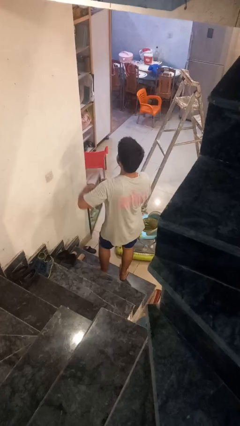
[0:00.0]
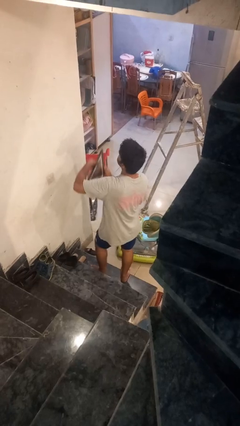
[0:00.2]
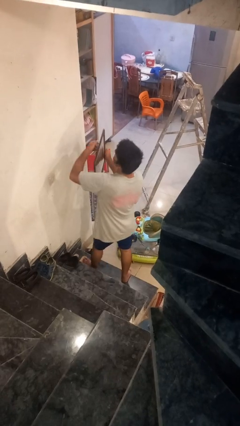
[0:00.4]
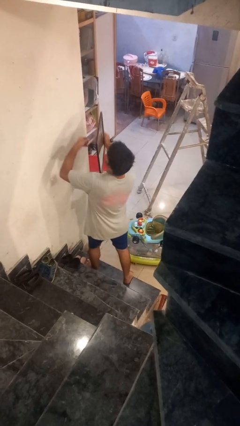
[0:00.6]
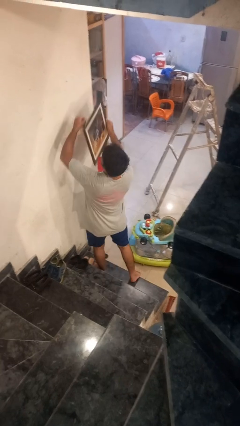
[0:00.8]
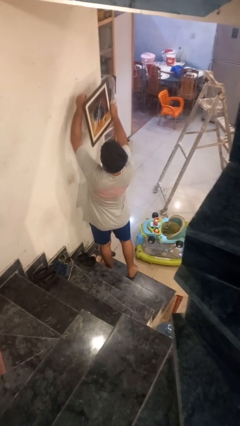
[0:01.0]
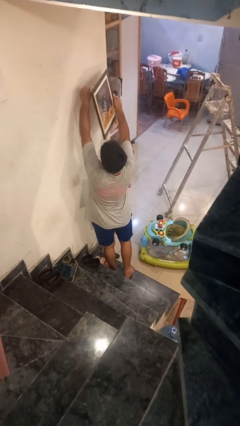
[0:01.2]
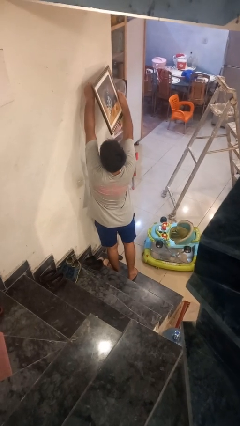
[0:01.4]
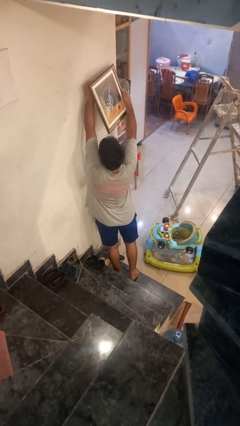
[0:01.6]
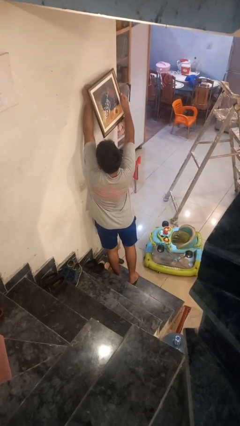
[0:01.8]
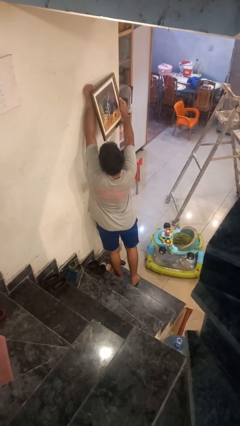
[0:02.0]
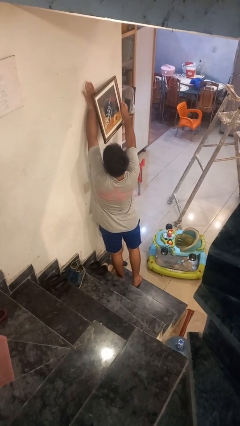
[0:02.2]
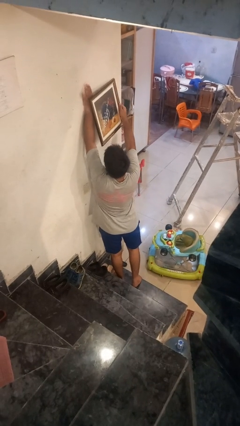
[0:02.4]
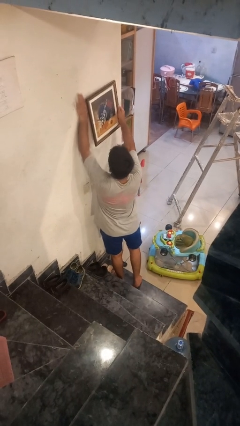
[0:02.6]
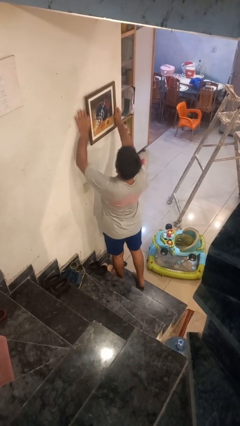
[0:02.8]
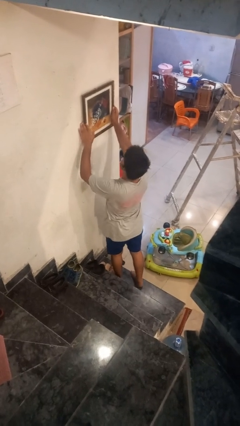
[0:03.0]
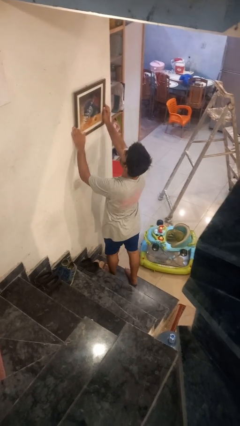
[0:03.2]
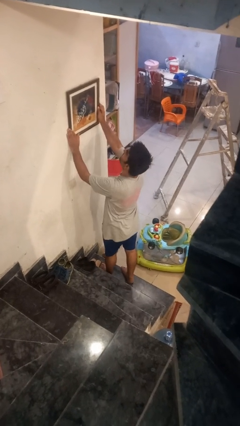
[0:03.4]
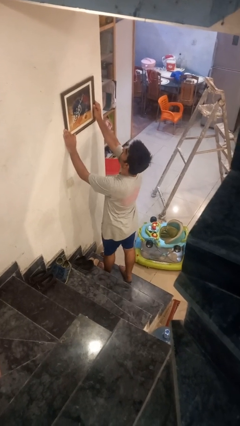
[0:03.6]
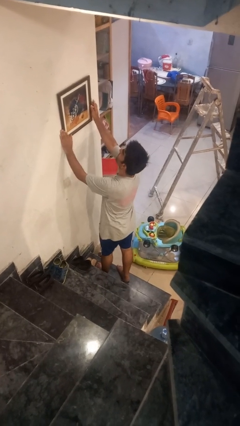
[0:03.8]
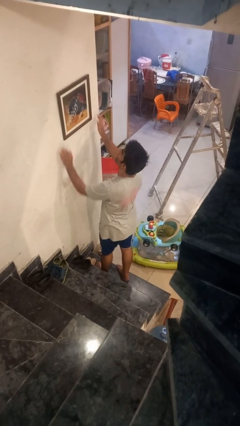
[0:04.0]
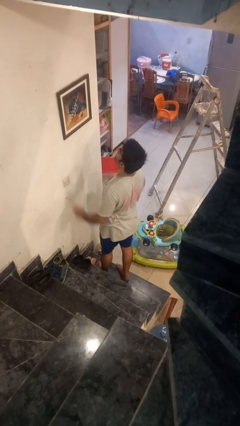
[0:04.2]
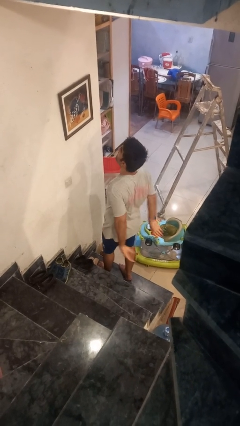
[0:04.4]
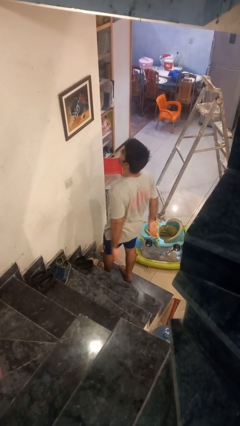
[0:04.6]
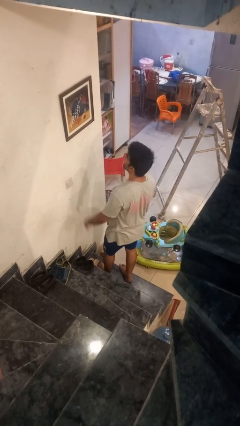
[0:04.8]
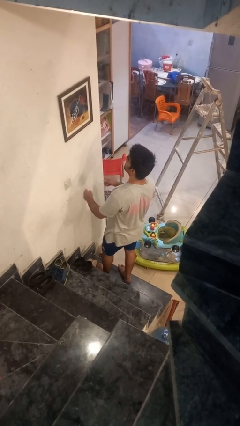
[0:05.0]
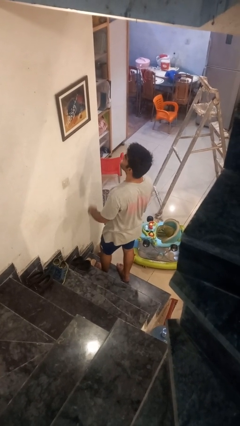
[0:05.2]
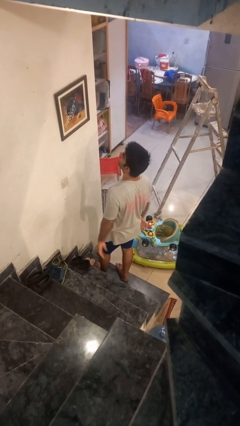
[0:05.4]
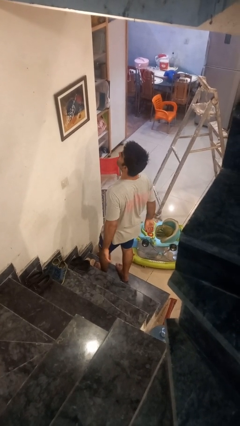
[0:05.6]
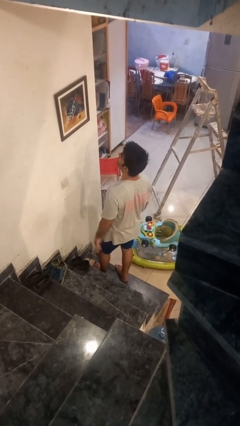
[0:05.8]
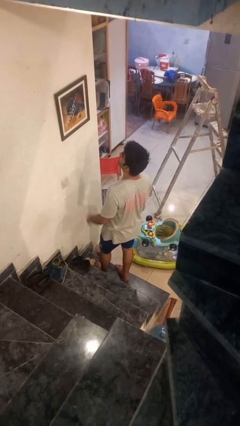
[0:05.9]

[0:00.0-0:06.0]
person puts up picture frame

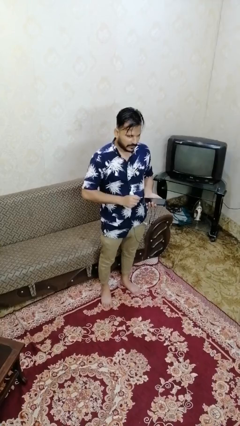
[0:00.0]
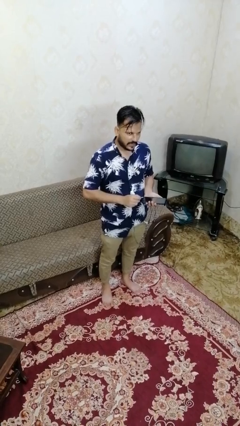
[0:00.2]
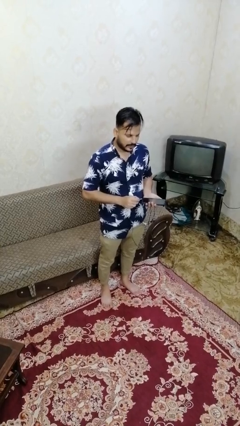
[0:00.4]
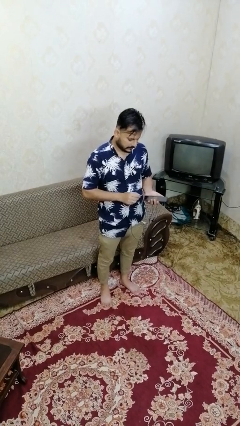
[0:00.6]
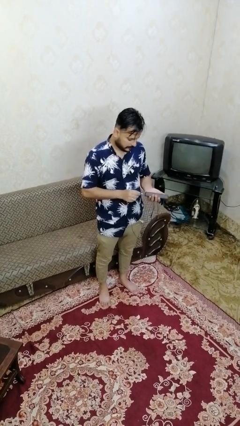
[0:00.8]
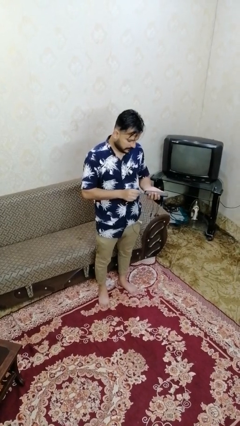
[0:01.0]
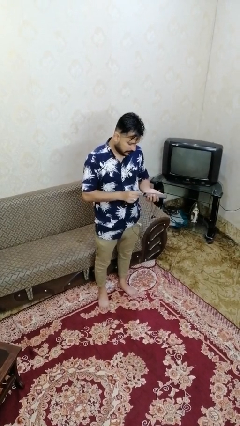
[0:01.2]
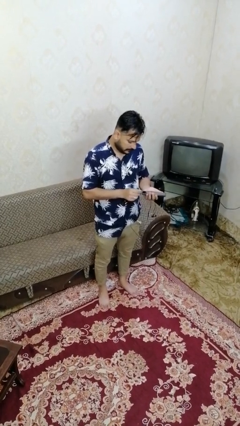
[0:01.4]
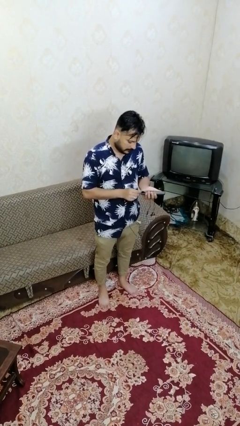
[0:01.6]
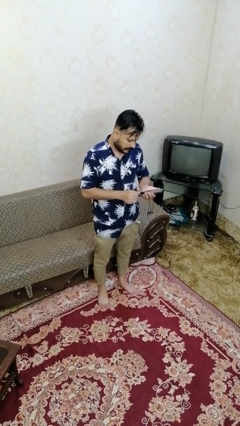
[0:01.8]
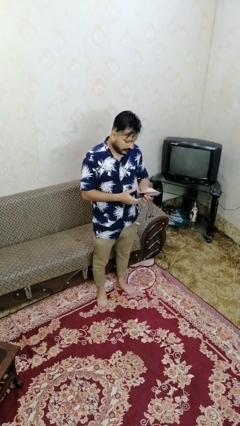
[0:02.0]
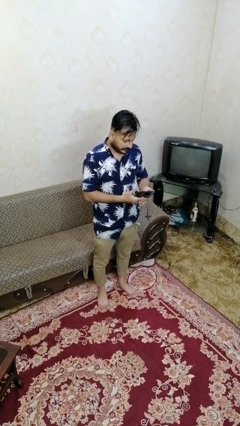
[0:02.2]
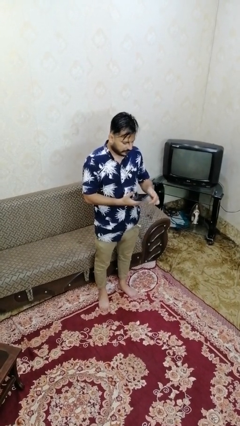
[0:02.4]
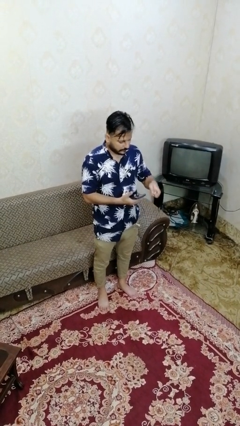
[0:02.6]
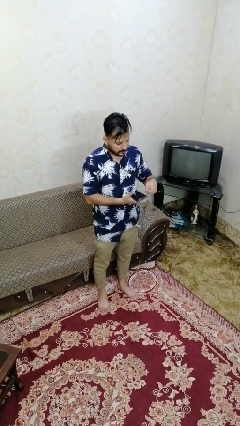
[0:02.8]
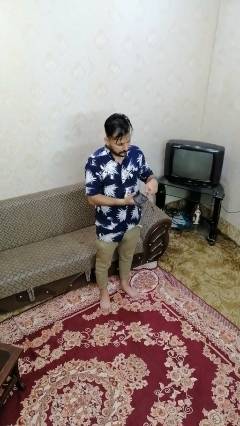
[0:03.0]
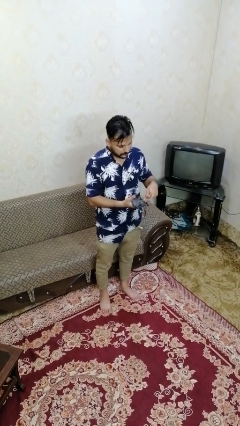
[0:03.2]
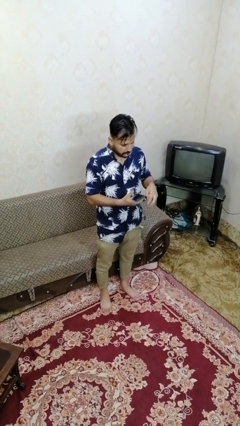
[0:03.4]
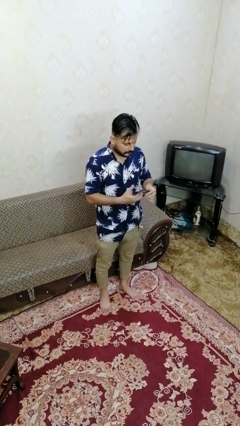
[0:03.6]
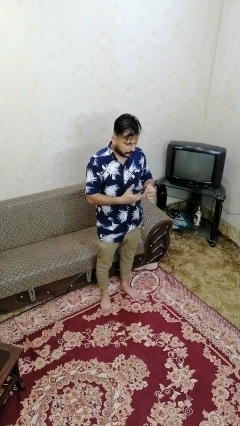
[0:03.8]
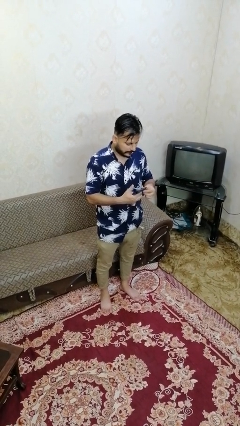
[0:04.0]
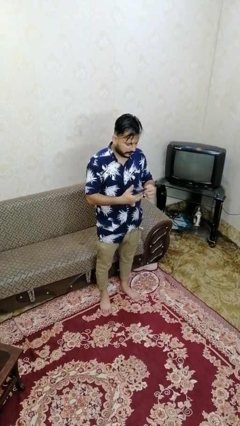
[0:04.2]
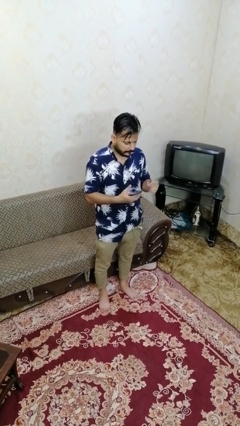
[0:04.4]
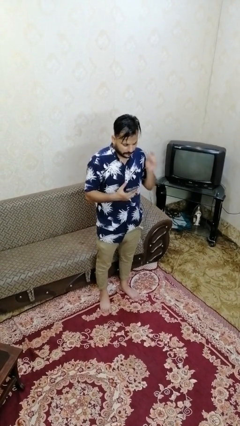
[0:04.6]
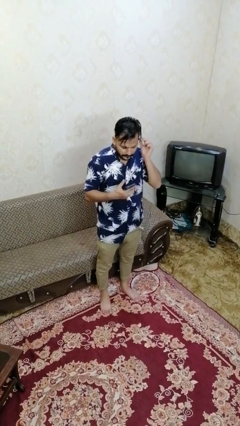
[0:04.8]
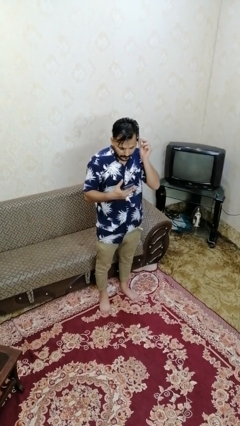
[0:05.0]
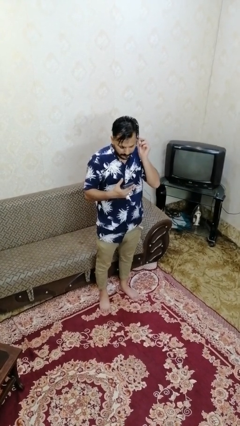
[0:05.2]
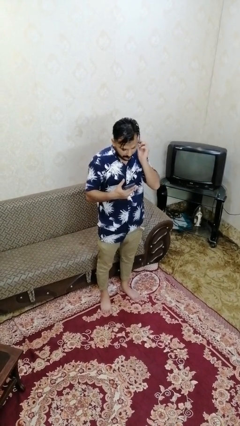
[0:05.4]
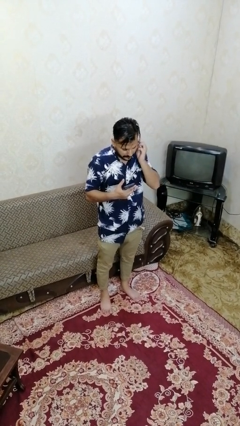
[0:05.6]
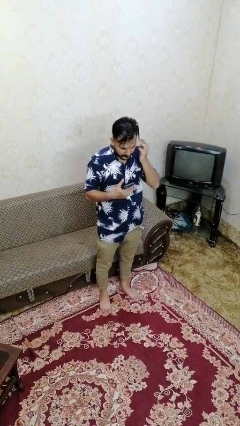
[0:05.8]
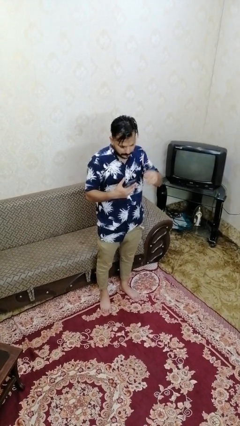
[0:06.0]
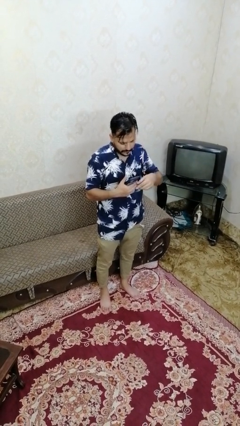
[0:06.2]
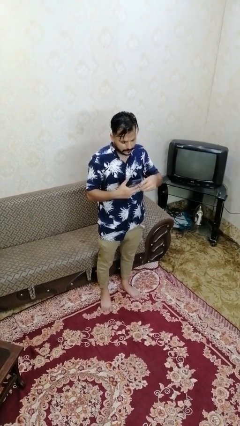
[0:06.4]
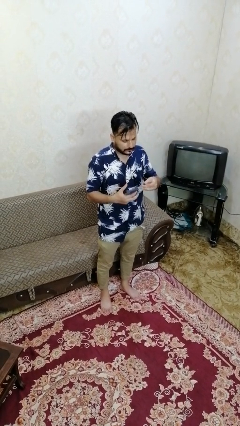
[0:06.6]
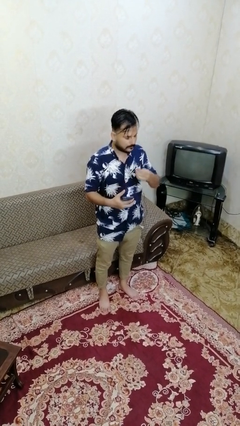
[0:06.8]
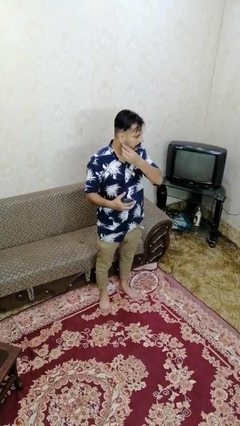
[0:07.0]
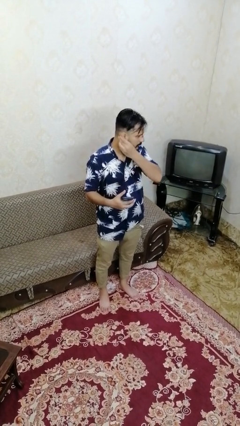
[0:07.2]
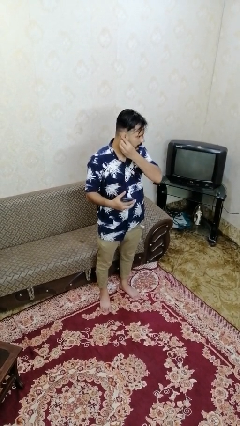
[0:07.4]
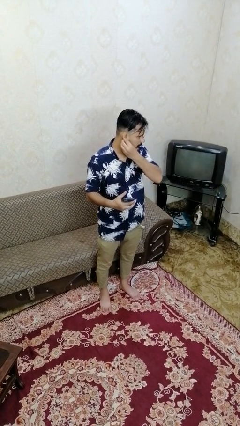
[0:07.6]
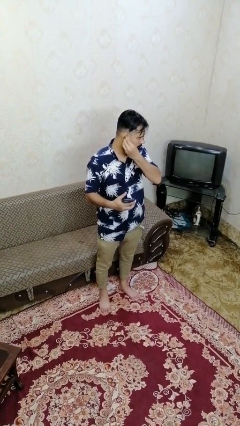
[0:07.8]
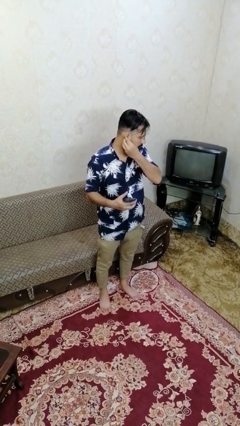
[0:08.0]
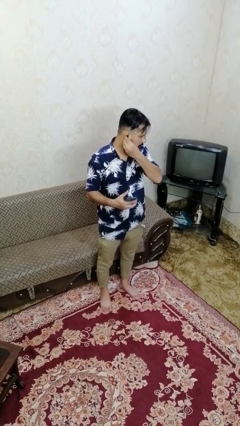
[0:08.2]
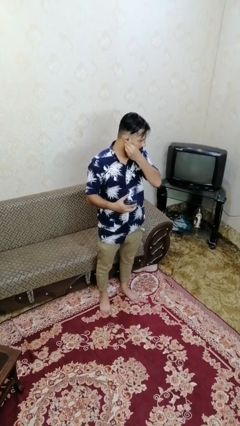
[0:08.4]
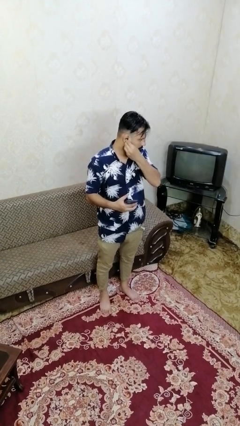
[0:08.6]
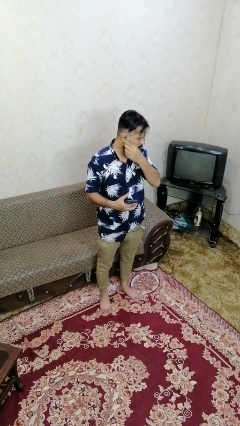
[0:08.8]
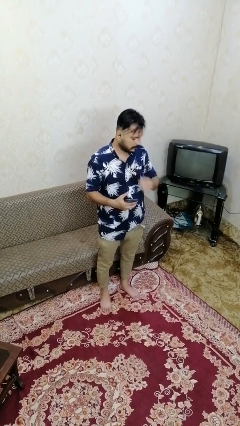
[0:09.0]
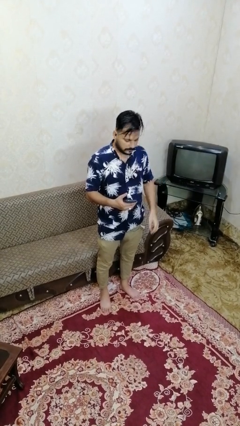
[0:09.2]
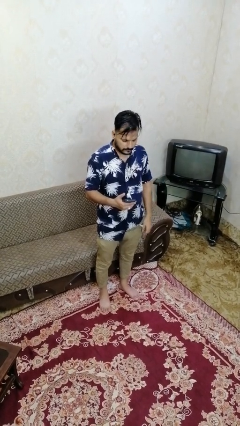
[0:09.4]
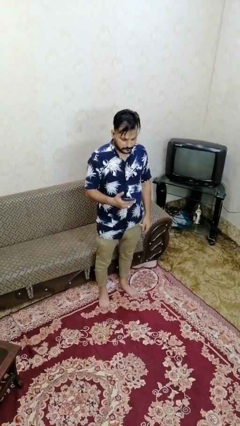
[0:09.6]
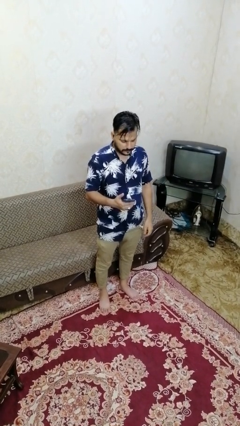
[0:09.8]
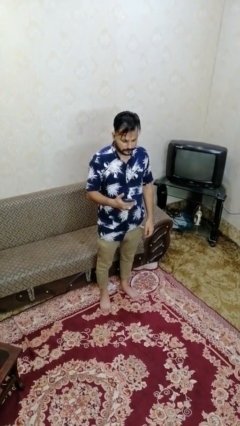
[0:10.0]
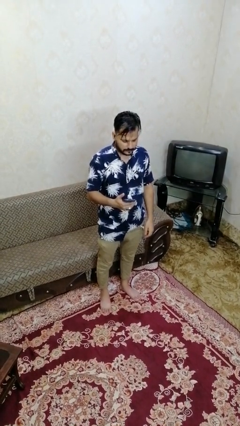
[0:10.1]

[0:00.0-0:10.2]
person puts on headphones

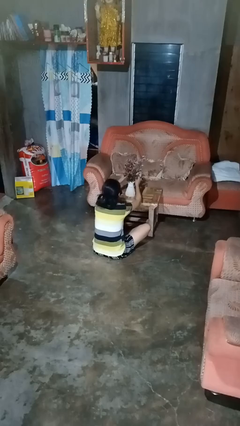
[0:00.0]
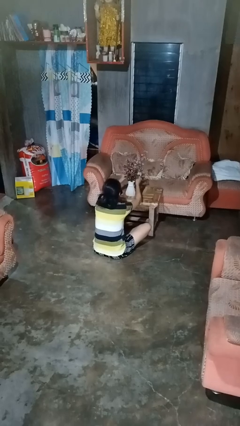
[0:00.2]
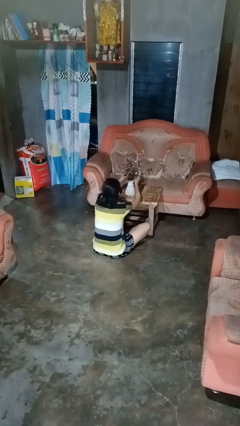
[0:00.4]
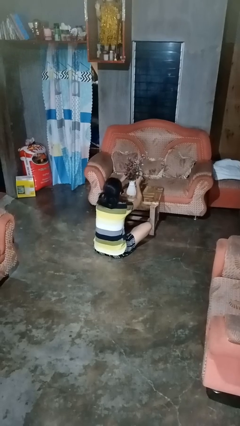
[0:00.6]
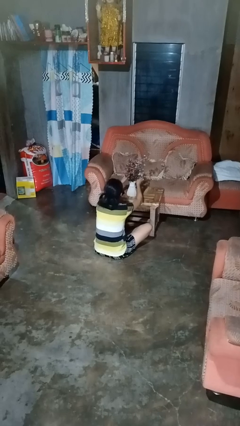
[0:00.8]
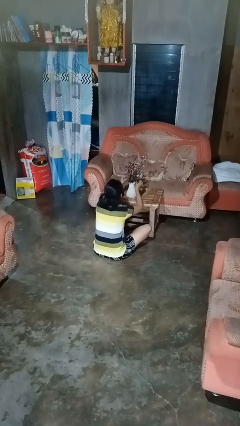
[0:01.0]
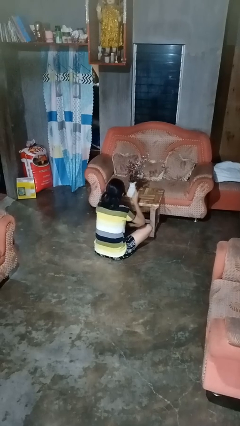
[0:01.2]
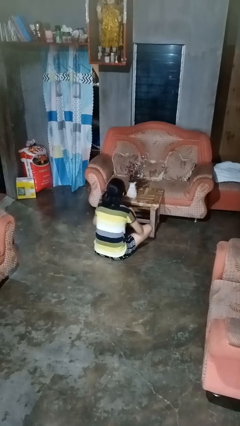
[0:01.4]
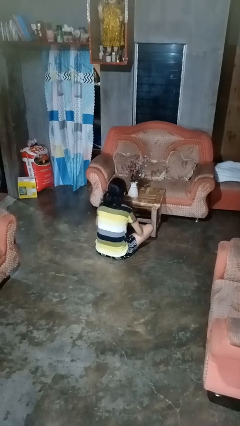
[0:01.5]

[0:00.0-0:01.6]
person arranges flowers in vase

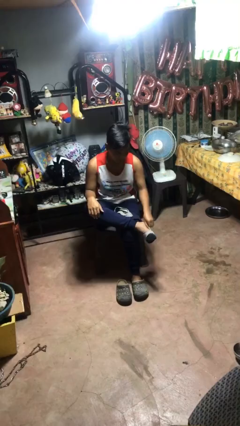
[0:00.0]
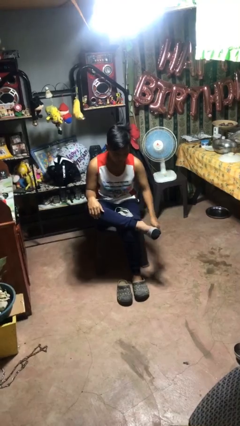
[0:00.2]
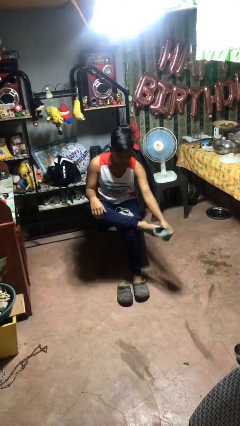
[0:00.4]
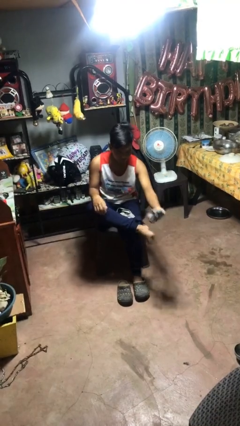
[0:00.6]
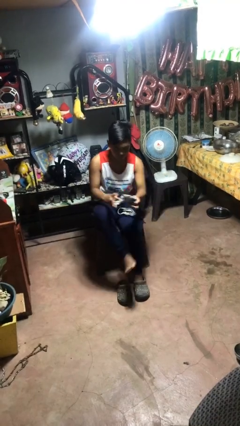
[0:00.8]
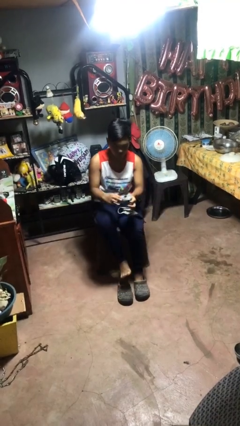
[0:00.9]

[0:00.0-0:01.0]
person takes off socks
